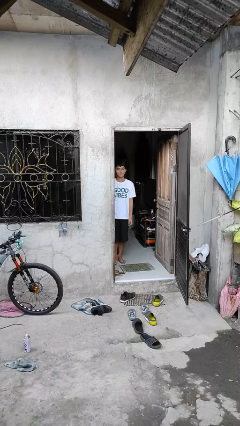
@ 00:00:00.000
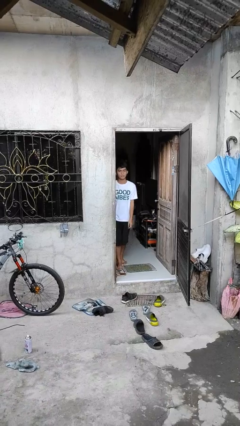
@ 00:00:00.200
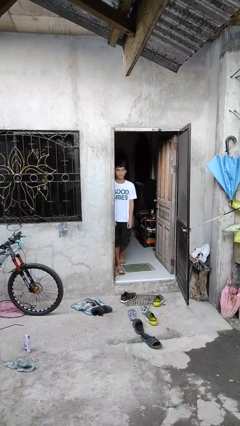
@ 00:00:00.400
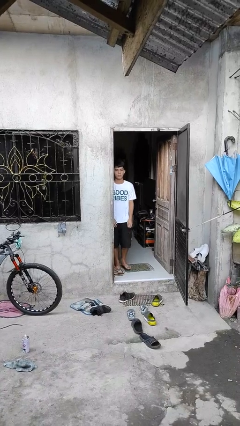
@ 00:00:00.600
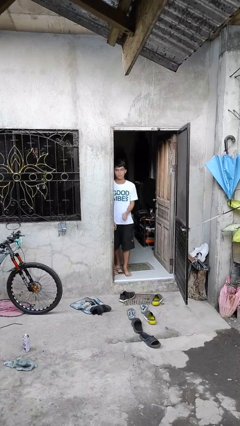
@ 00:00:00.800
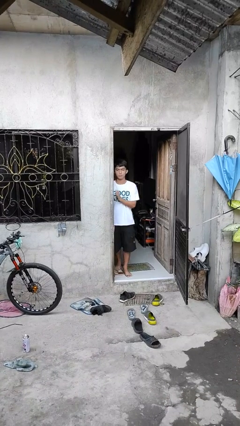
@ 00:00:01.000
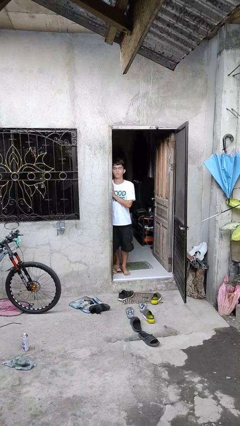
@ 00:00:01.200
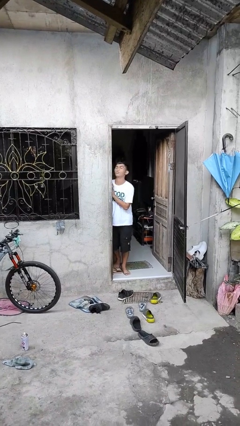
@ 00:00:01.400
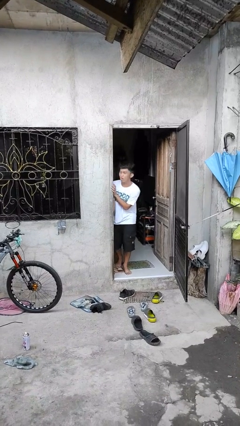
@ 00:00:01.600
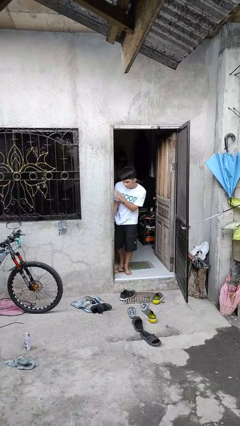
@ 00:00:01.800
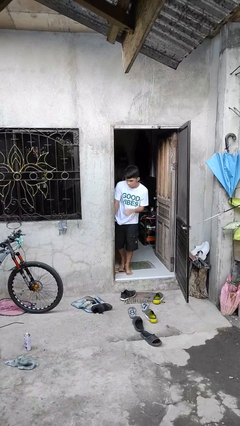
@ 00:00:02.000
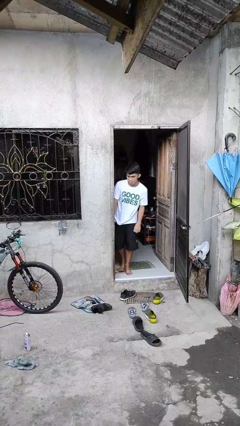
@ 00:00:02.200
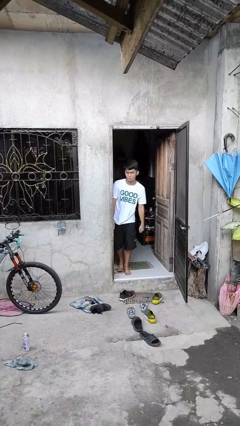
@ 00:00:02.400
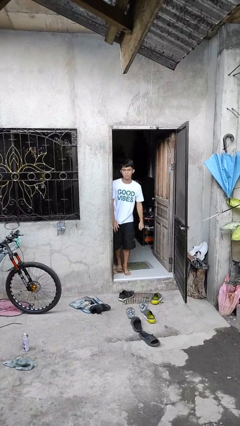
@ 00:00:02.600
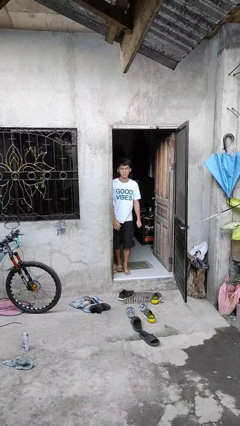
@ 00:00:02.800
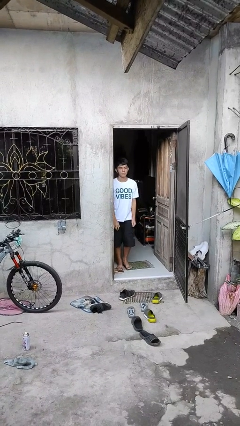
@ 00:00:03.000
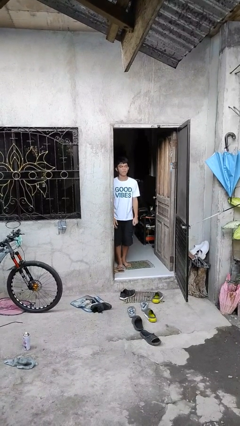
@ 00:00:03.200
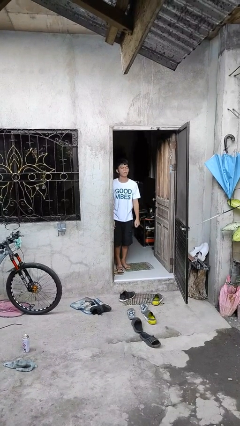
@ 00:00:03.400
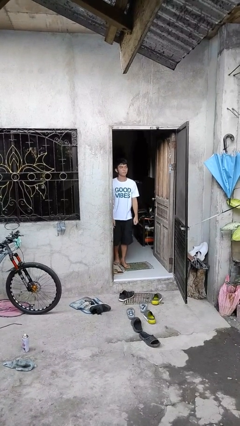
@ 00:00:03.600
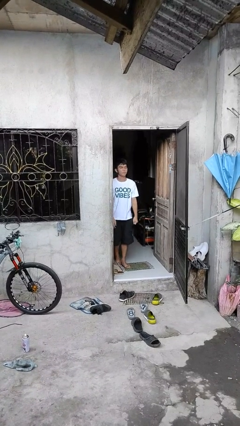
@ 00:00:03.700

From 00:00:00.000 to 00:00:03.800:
person bumps into wall

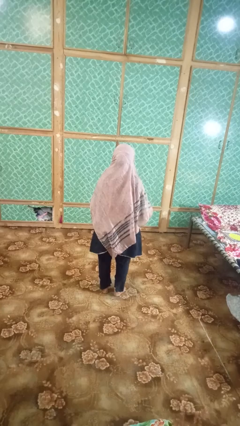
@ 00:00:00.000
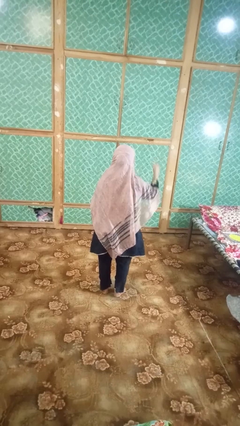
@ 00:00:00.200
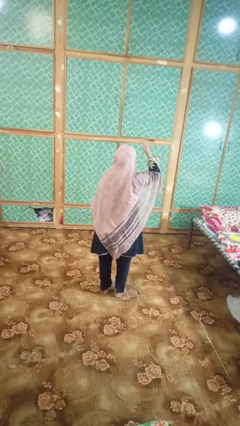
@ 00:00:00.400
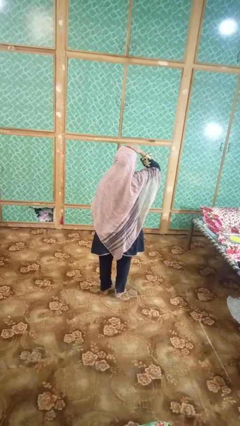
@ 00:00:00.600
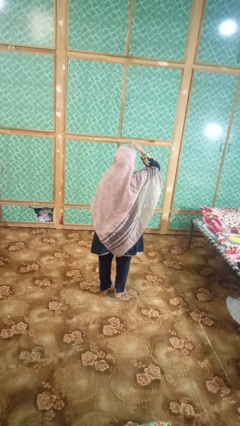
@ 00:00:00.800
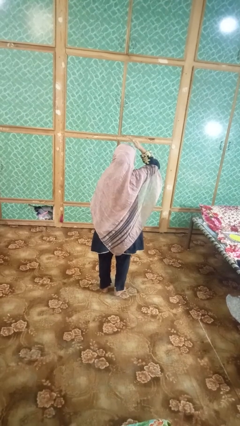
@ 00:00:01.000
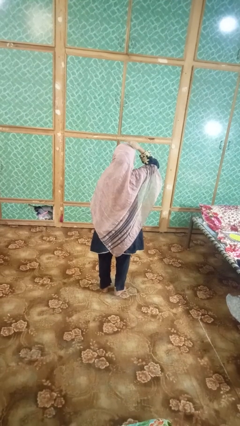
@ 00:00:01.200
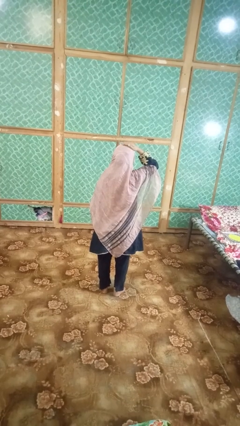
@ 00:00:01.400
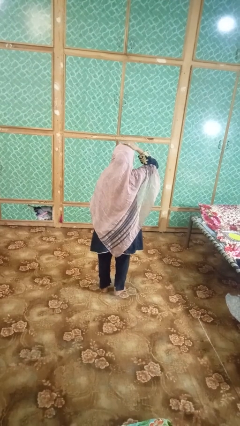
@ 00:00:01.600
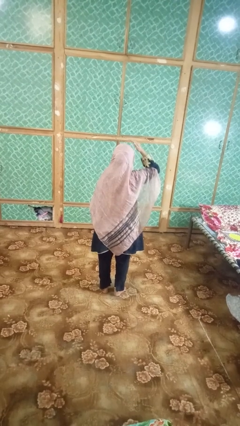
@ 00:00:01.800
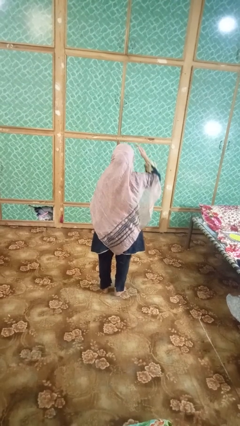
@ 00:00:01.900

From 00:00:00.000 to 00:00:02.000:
person pats head

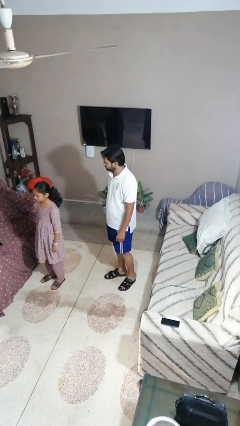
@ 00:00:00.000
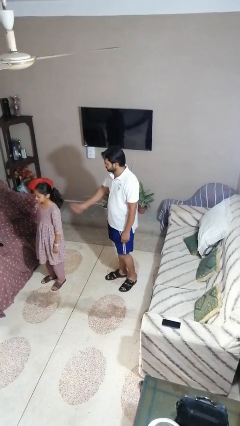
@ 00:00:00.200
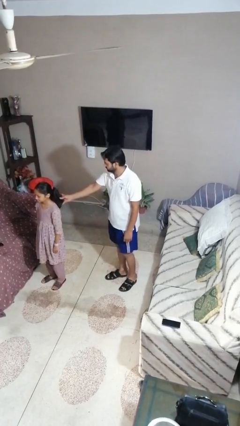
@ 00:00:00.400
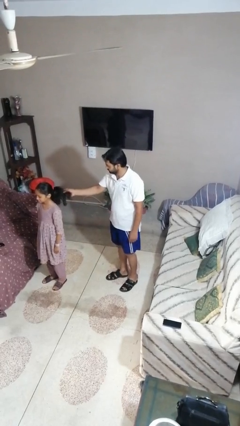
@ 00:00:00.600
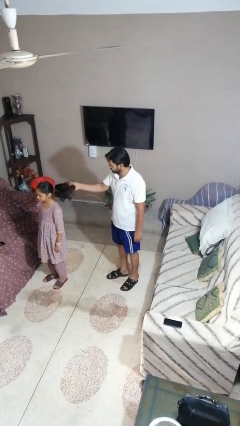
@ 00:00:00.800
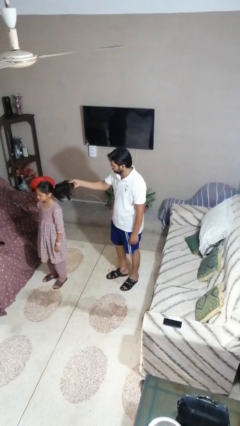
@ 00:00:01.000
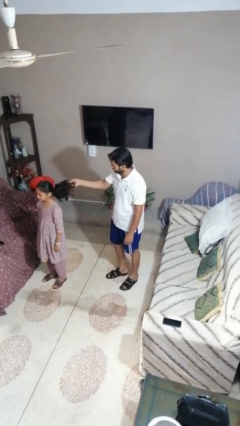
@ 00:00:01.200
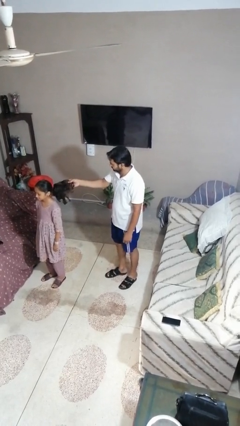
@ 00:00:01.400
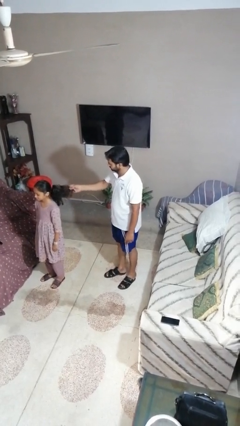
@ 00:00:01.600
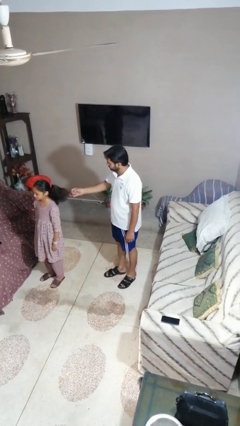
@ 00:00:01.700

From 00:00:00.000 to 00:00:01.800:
person grabs person by hair

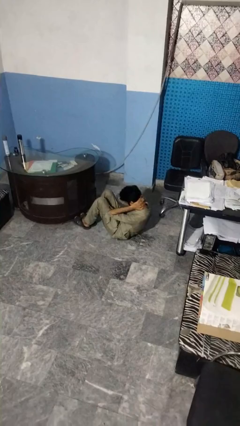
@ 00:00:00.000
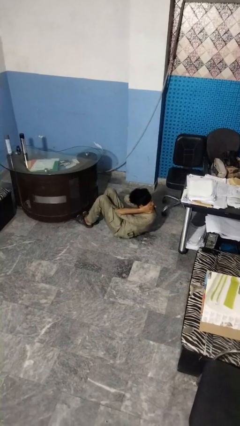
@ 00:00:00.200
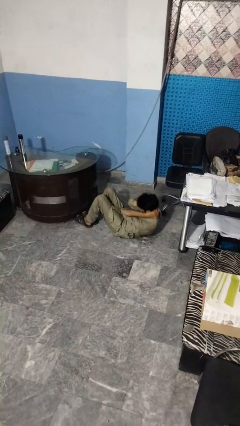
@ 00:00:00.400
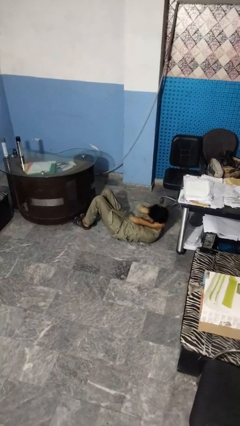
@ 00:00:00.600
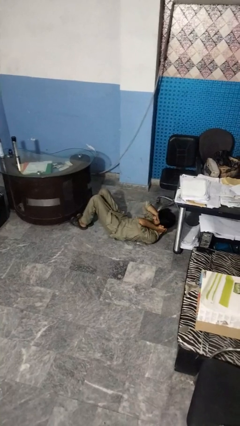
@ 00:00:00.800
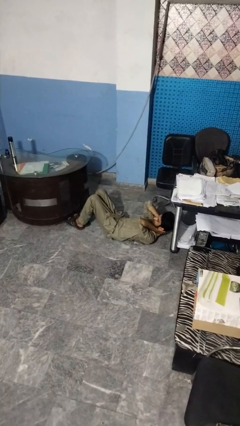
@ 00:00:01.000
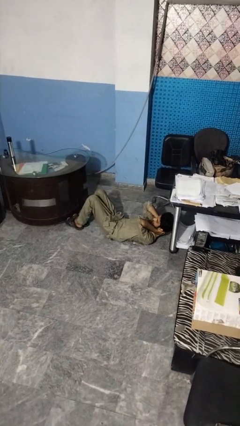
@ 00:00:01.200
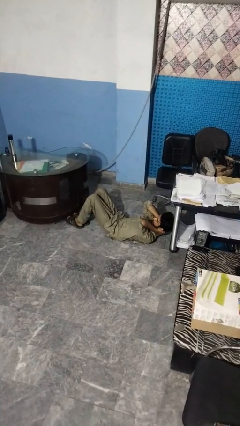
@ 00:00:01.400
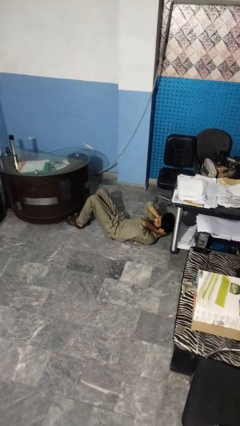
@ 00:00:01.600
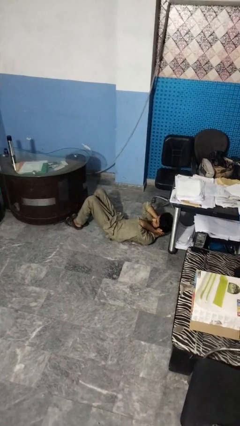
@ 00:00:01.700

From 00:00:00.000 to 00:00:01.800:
person exercises with situp

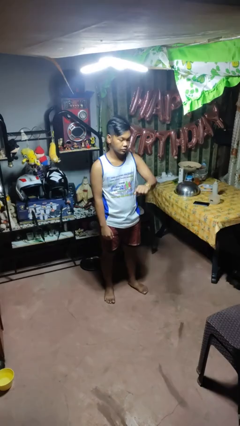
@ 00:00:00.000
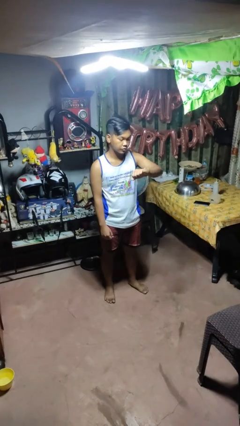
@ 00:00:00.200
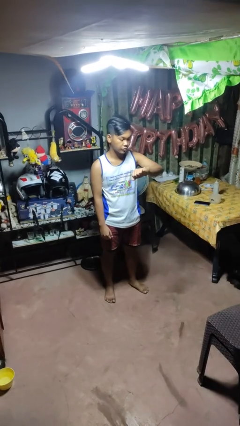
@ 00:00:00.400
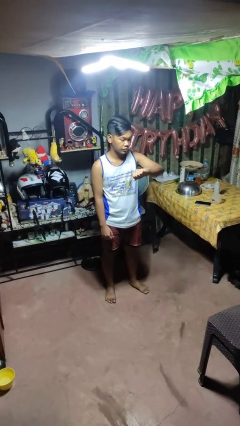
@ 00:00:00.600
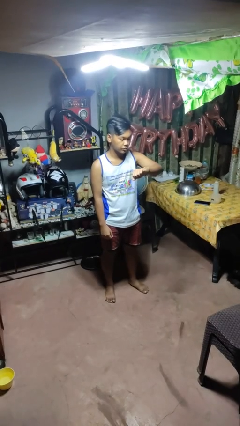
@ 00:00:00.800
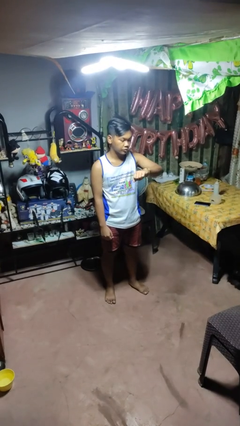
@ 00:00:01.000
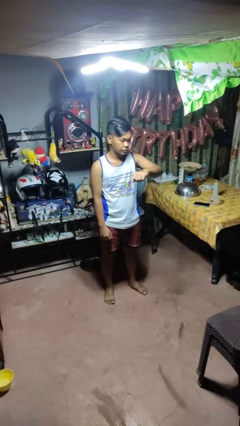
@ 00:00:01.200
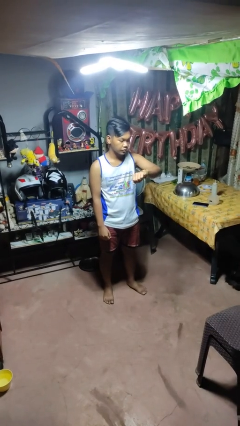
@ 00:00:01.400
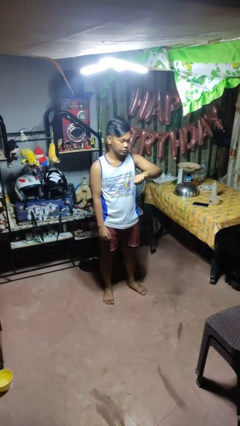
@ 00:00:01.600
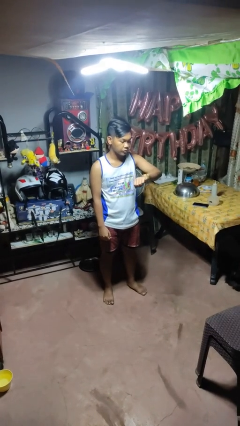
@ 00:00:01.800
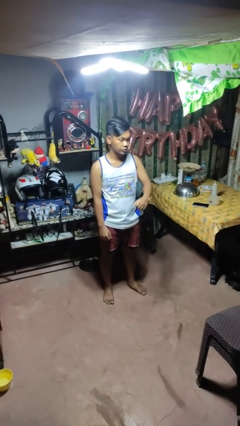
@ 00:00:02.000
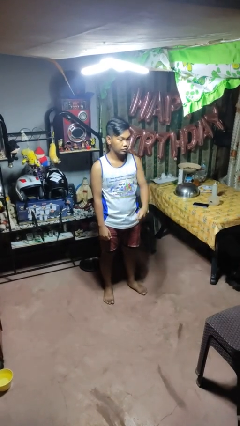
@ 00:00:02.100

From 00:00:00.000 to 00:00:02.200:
person looks at wristwatch

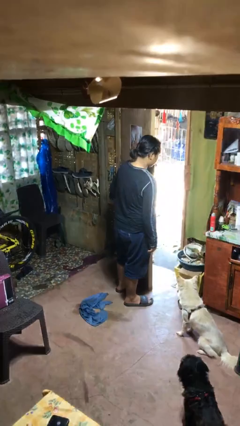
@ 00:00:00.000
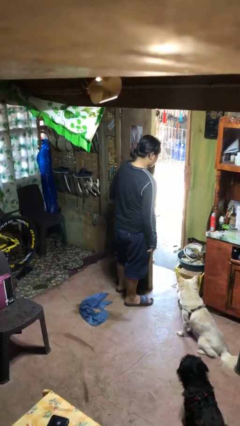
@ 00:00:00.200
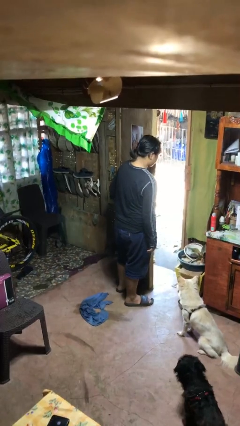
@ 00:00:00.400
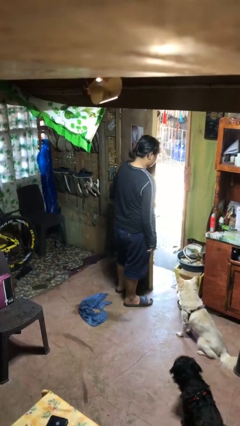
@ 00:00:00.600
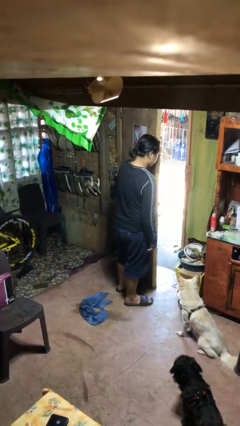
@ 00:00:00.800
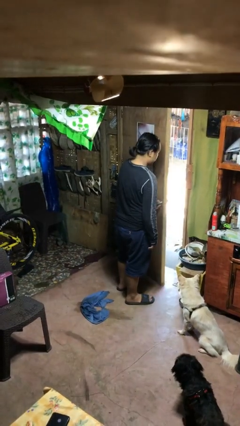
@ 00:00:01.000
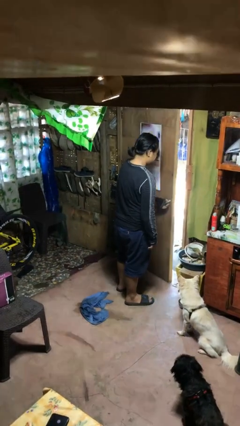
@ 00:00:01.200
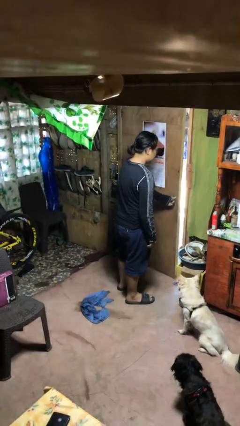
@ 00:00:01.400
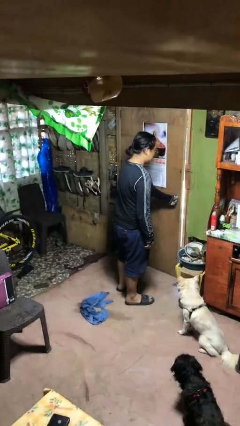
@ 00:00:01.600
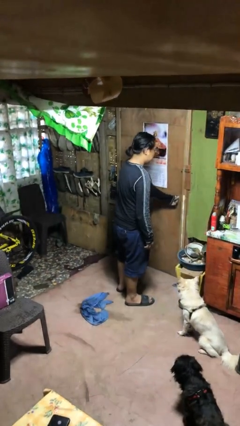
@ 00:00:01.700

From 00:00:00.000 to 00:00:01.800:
person closes facility door

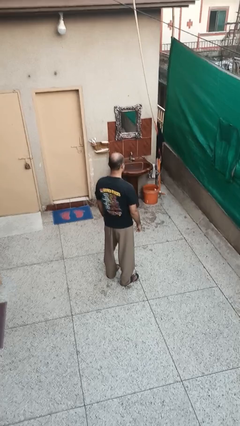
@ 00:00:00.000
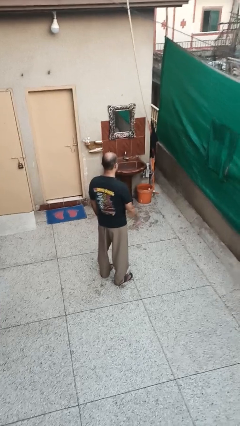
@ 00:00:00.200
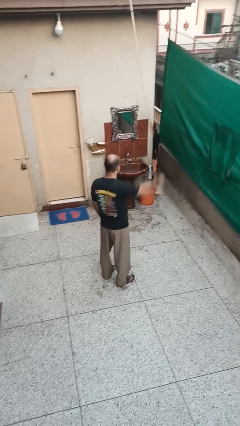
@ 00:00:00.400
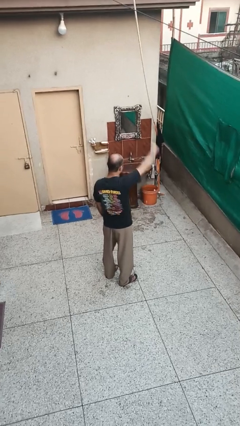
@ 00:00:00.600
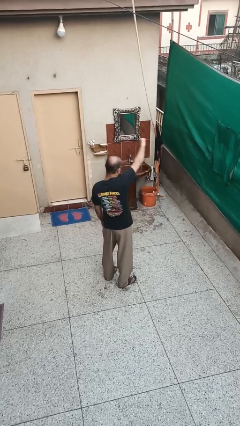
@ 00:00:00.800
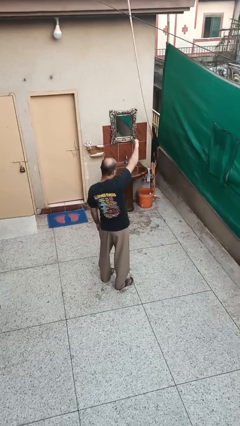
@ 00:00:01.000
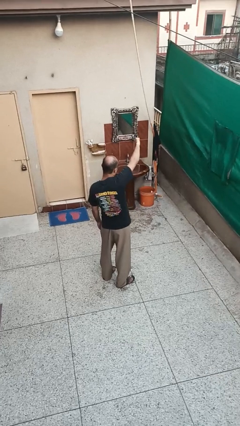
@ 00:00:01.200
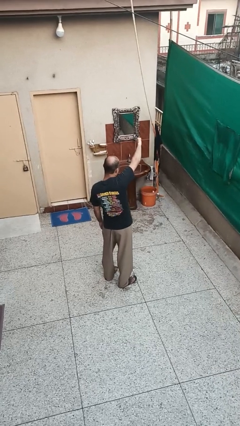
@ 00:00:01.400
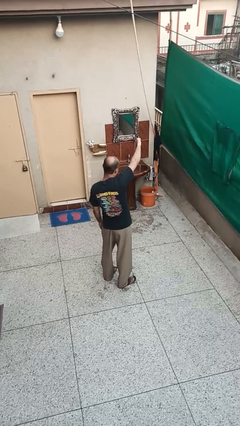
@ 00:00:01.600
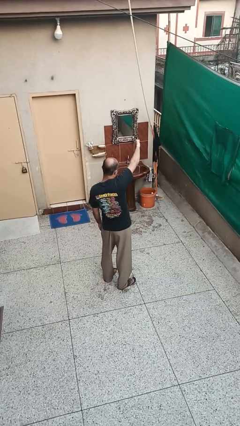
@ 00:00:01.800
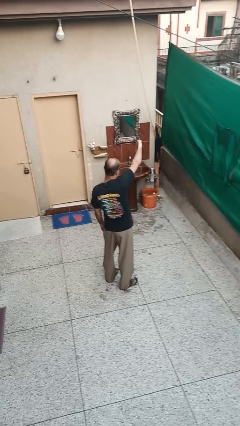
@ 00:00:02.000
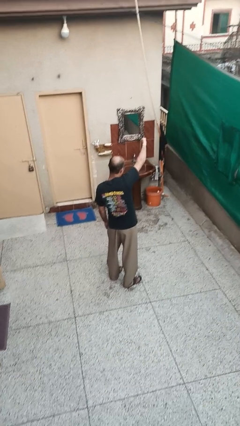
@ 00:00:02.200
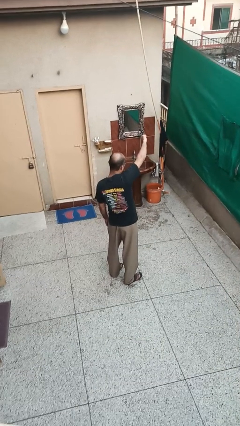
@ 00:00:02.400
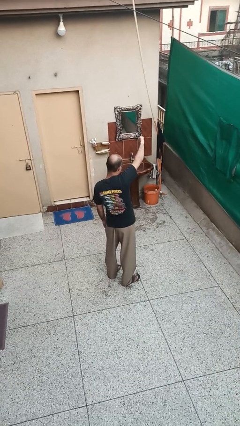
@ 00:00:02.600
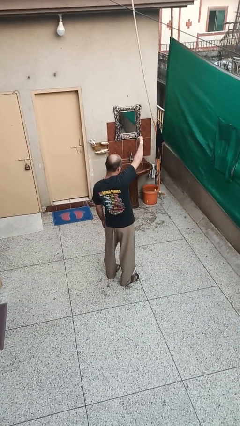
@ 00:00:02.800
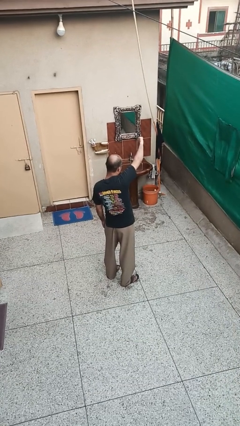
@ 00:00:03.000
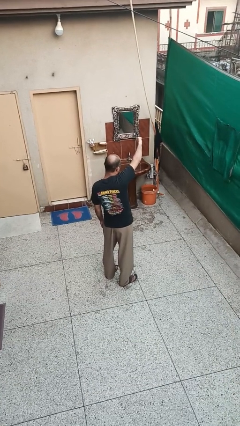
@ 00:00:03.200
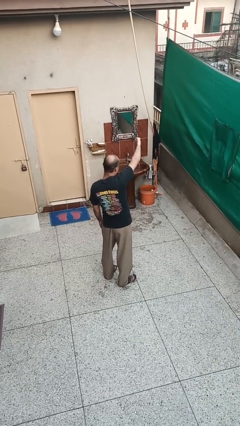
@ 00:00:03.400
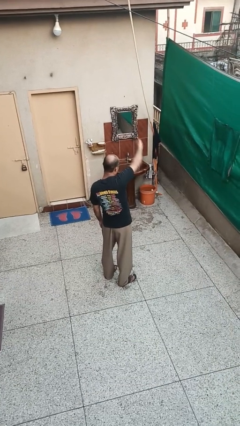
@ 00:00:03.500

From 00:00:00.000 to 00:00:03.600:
person gestures thumbs down
